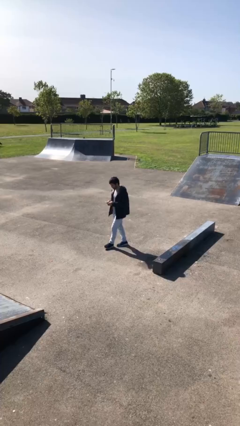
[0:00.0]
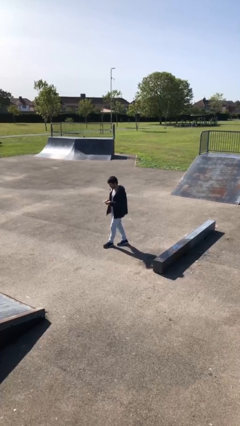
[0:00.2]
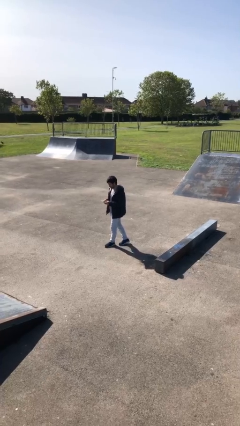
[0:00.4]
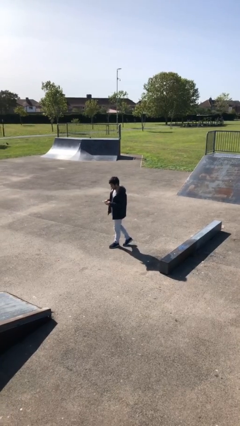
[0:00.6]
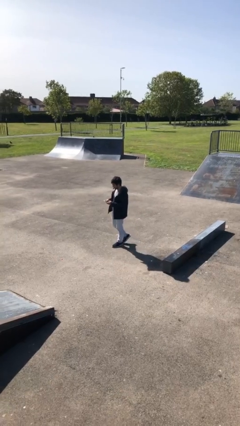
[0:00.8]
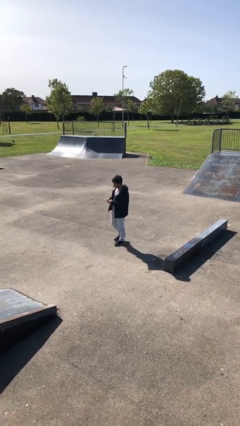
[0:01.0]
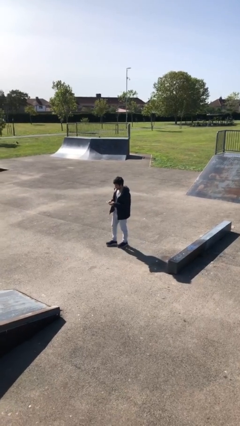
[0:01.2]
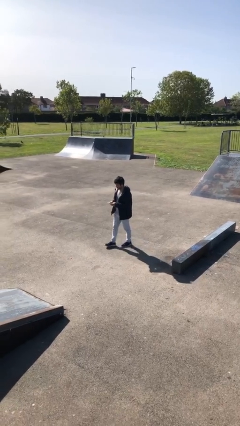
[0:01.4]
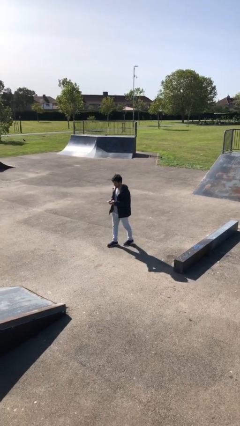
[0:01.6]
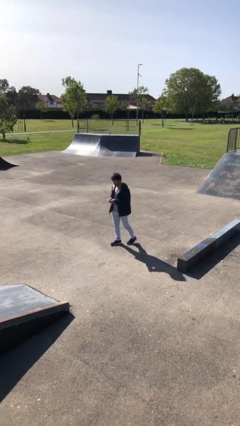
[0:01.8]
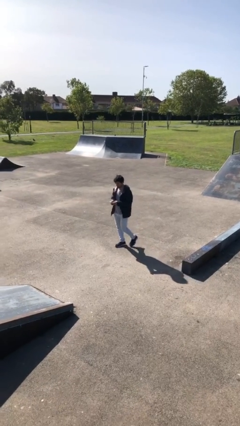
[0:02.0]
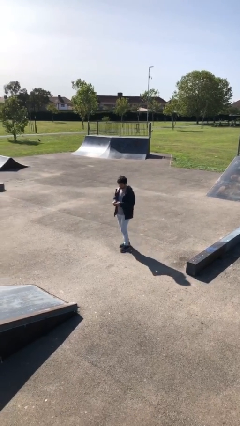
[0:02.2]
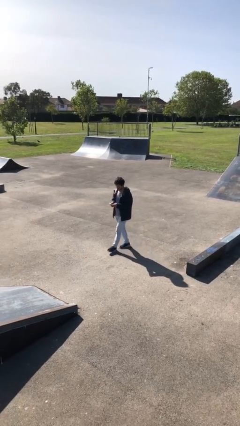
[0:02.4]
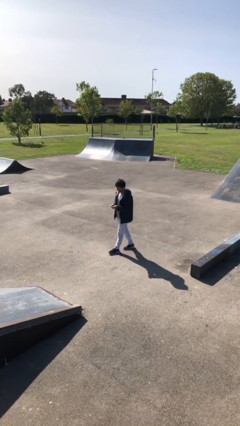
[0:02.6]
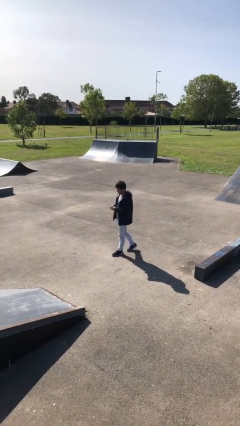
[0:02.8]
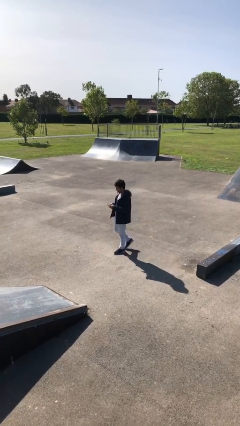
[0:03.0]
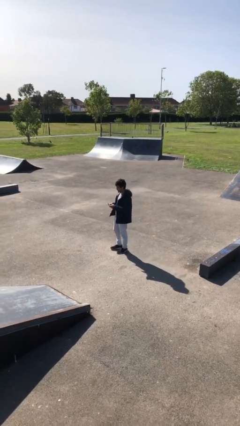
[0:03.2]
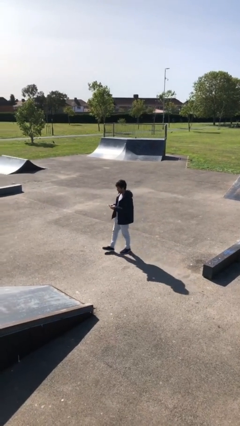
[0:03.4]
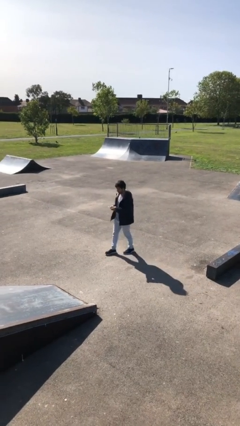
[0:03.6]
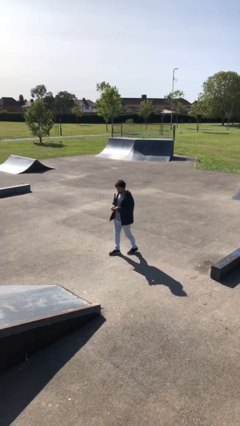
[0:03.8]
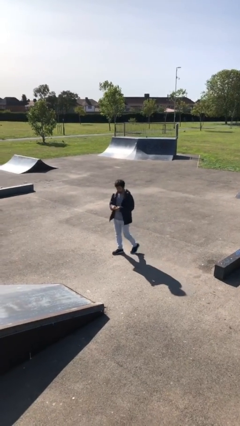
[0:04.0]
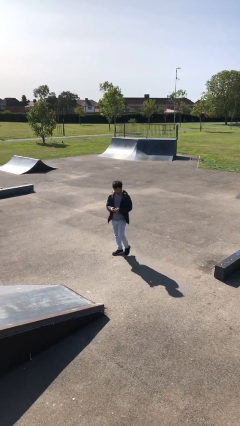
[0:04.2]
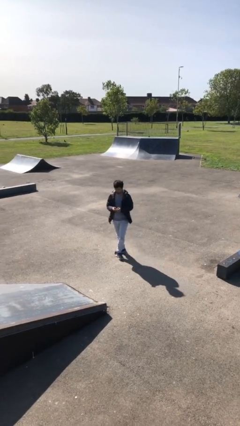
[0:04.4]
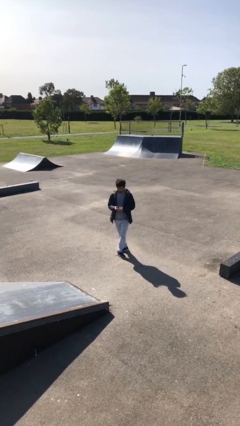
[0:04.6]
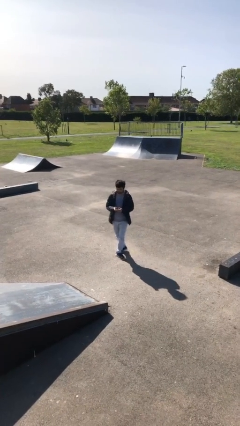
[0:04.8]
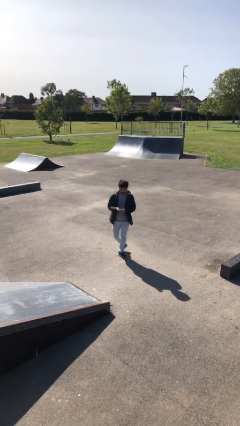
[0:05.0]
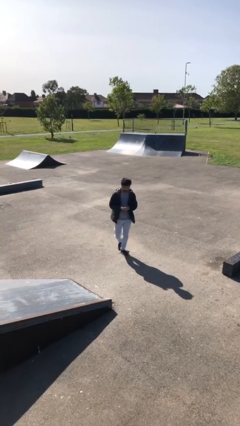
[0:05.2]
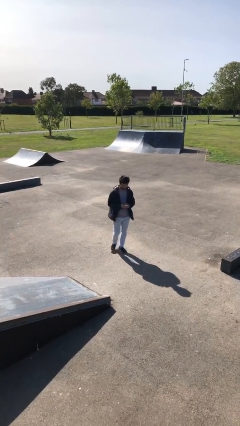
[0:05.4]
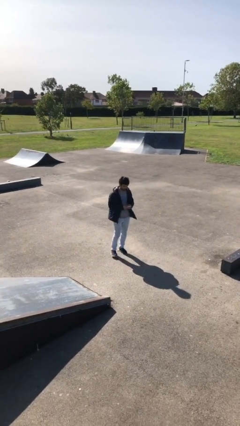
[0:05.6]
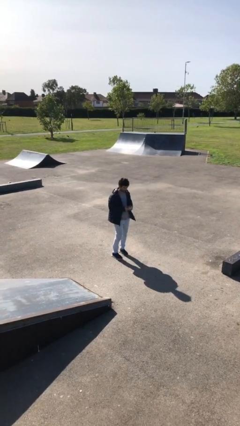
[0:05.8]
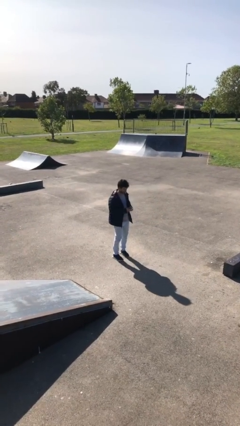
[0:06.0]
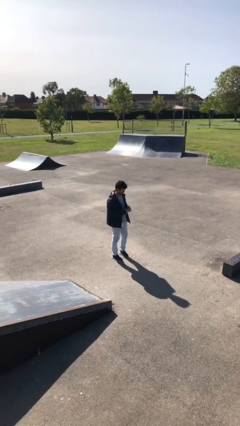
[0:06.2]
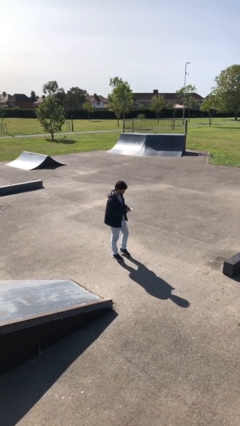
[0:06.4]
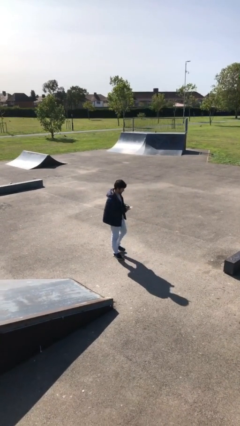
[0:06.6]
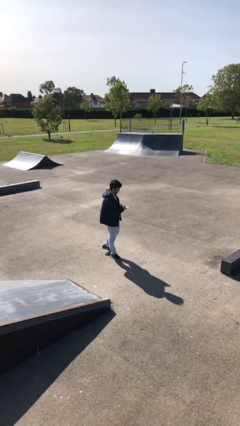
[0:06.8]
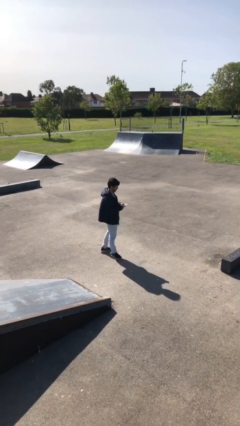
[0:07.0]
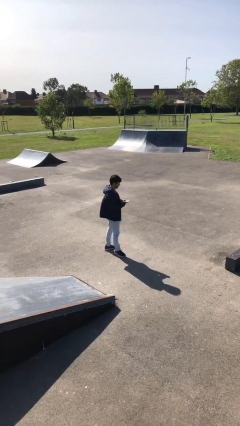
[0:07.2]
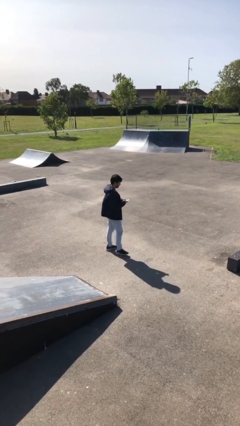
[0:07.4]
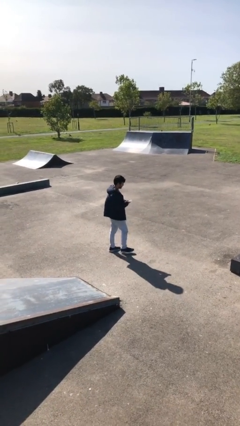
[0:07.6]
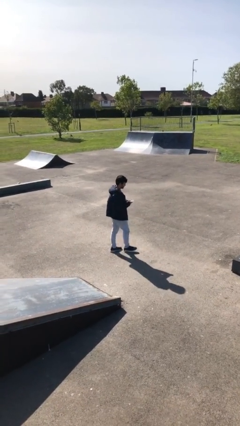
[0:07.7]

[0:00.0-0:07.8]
person texts on phone

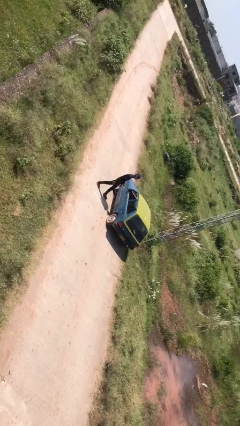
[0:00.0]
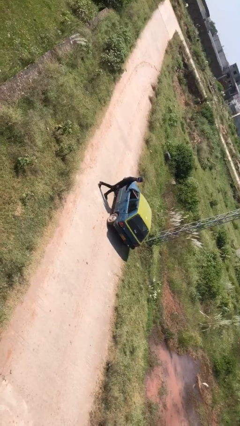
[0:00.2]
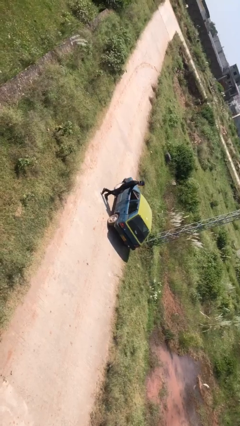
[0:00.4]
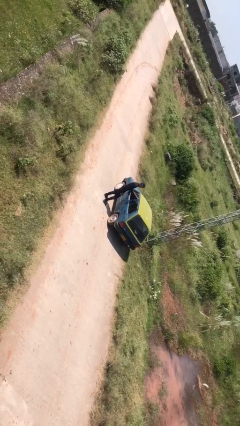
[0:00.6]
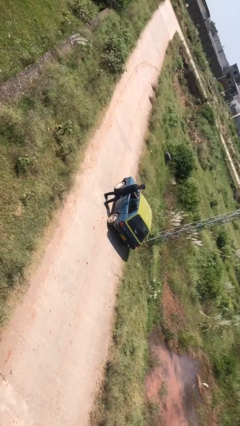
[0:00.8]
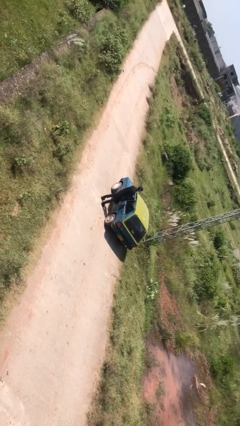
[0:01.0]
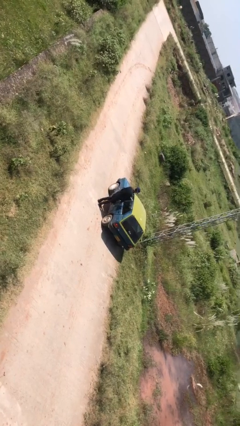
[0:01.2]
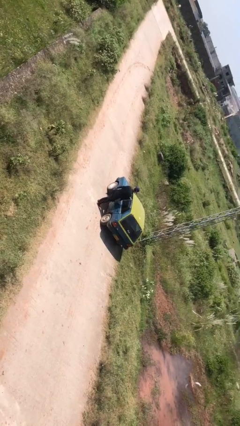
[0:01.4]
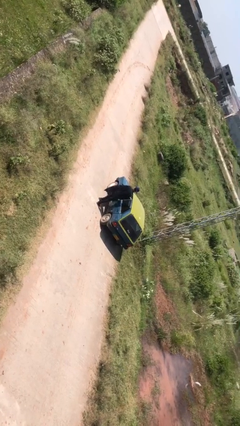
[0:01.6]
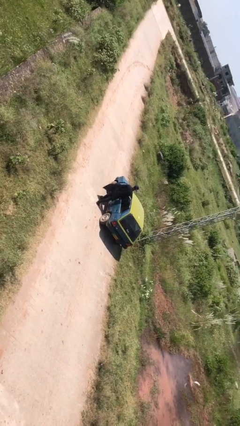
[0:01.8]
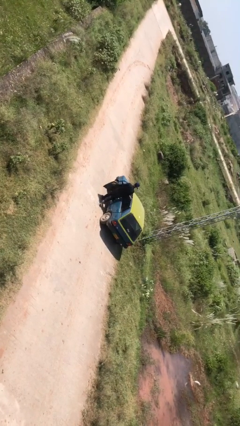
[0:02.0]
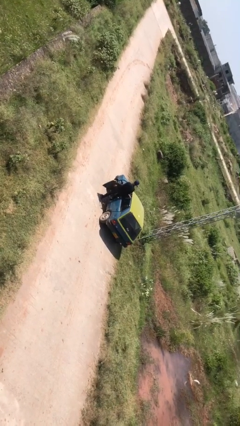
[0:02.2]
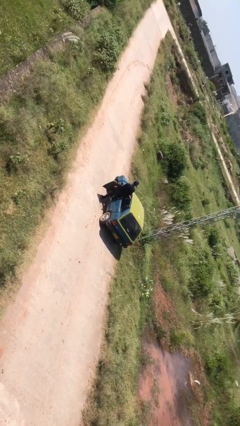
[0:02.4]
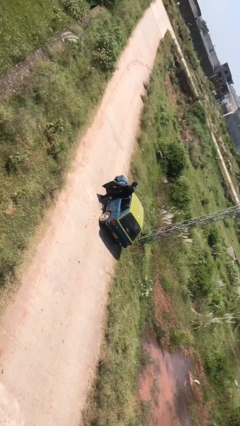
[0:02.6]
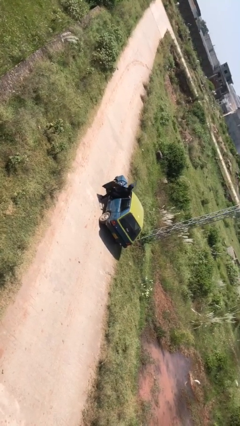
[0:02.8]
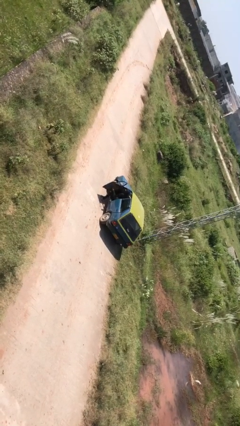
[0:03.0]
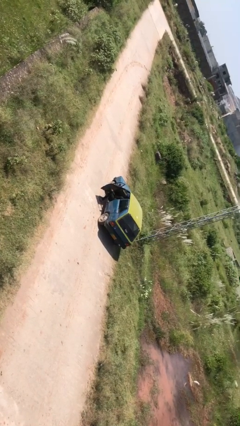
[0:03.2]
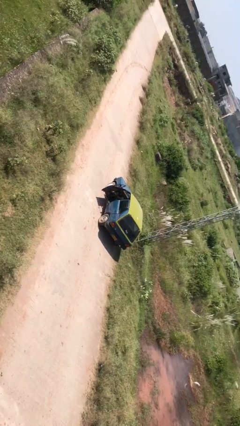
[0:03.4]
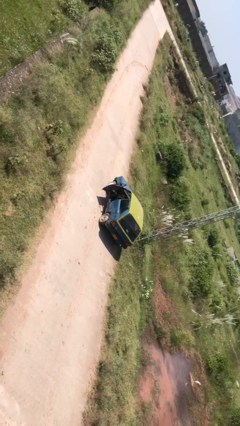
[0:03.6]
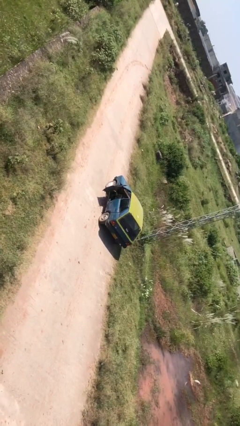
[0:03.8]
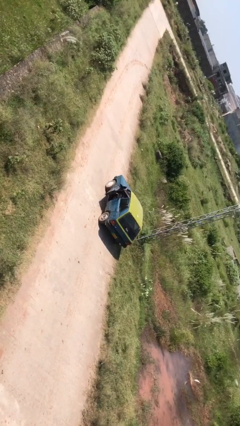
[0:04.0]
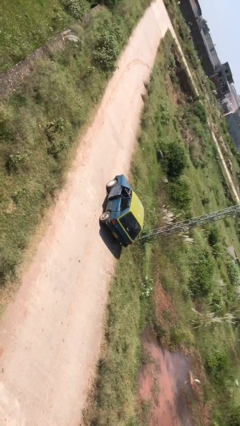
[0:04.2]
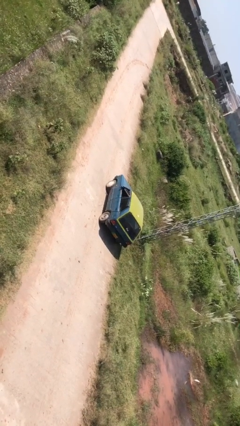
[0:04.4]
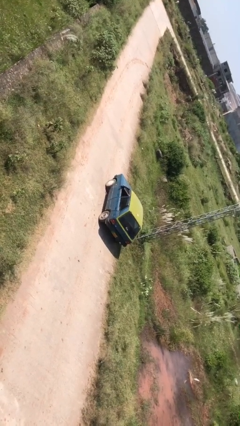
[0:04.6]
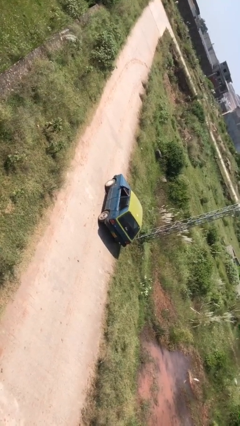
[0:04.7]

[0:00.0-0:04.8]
car picks up person

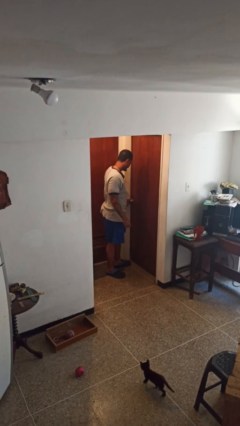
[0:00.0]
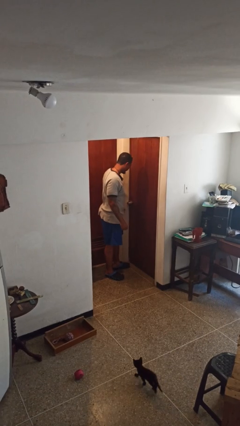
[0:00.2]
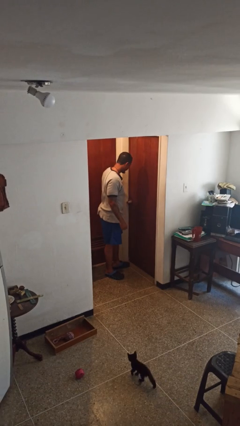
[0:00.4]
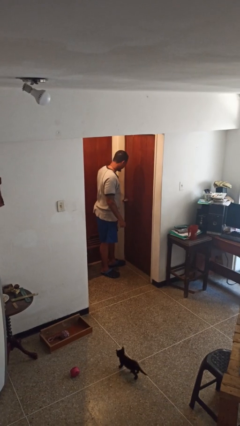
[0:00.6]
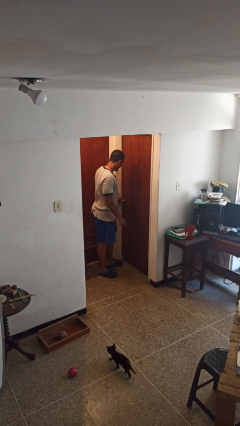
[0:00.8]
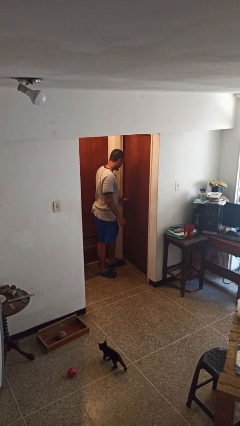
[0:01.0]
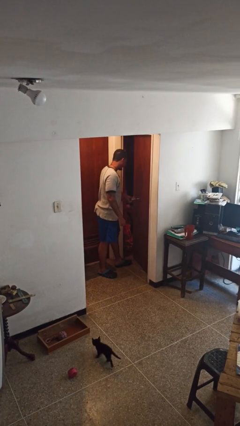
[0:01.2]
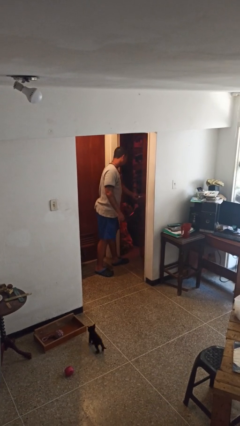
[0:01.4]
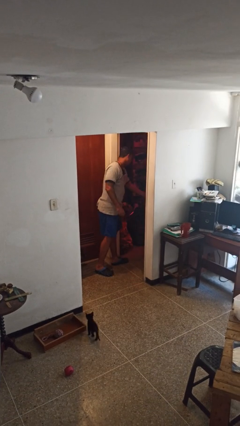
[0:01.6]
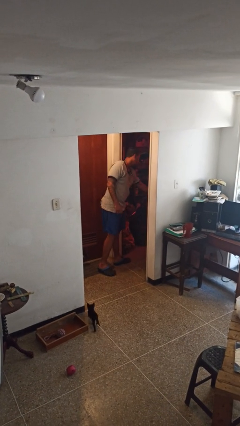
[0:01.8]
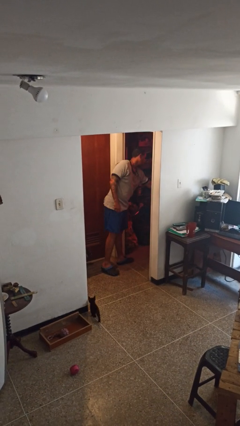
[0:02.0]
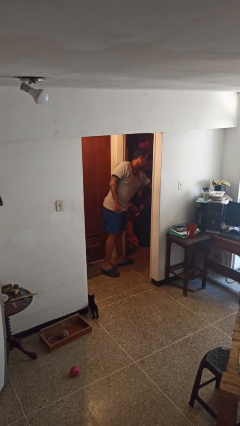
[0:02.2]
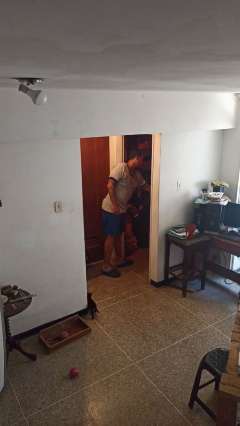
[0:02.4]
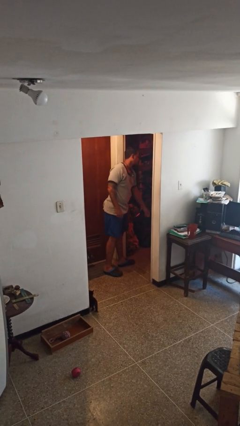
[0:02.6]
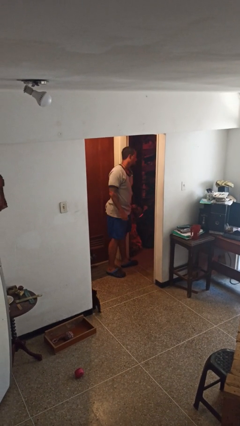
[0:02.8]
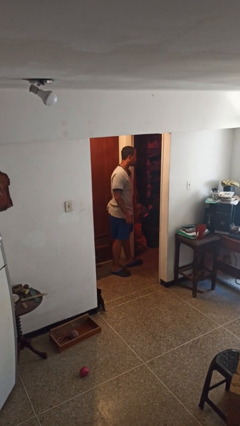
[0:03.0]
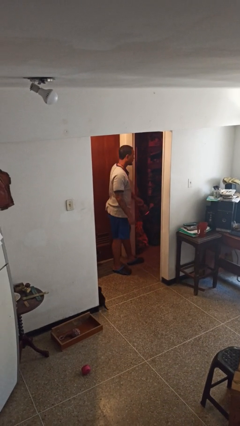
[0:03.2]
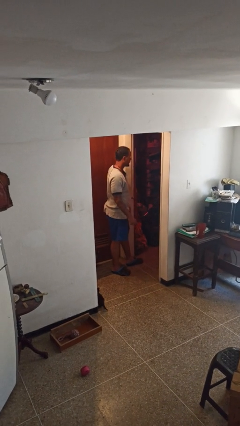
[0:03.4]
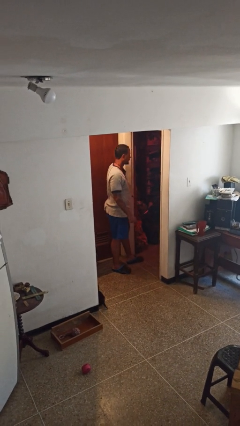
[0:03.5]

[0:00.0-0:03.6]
person opens facility door

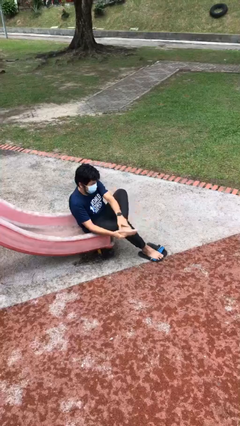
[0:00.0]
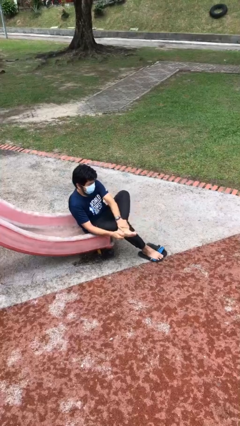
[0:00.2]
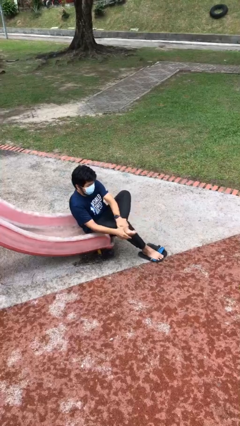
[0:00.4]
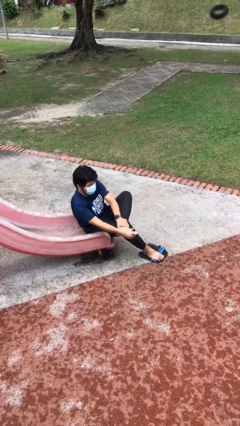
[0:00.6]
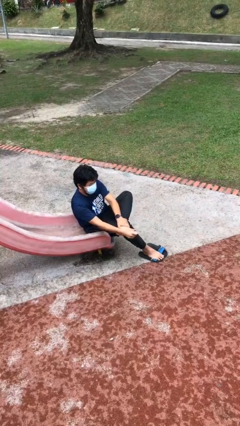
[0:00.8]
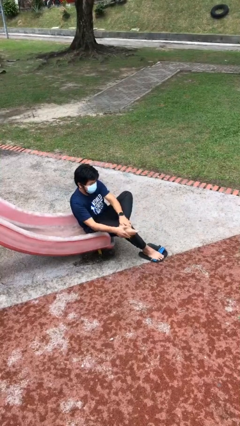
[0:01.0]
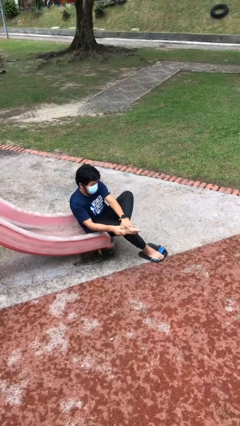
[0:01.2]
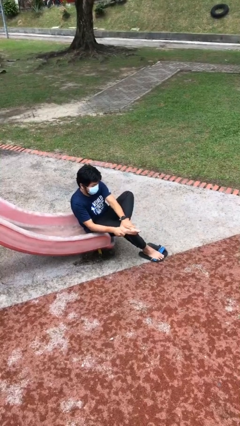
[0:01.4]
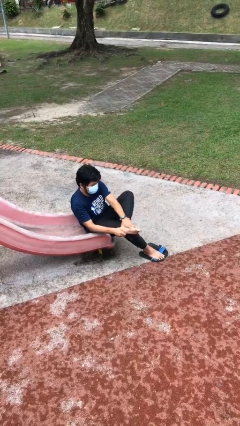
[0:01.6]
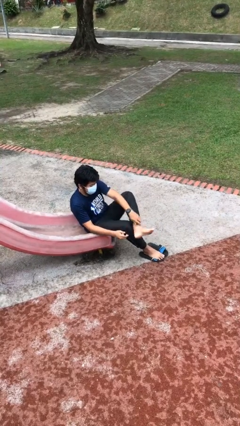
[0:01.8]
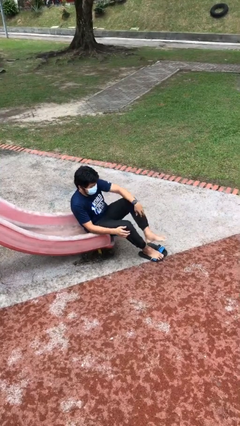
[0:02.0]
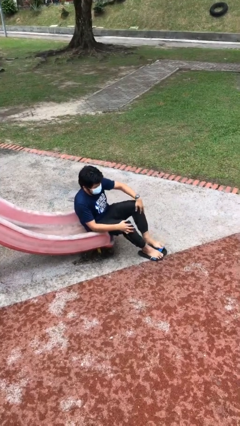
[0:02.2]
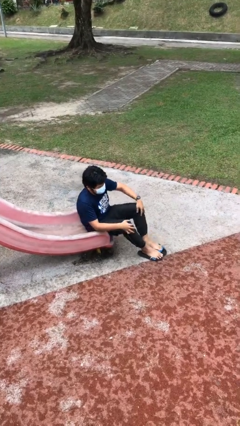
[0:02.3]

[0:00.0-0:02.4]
person rubs foot
